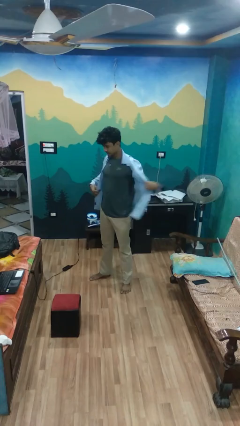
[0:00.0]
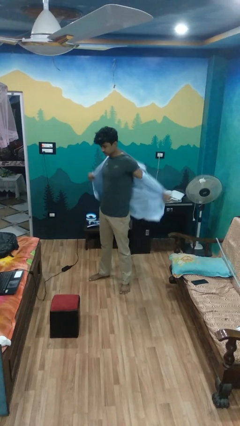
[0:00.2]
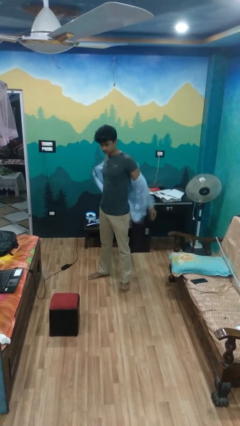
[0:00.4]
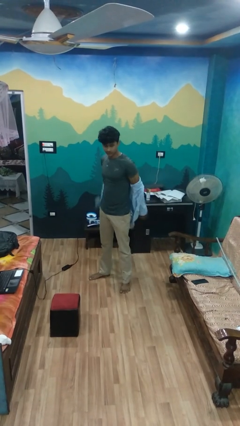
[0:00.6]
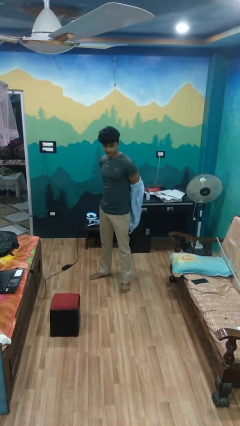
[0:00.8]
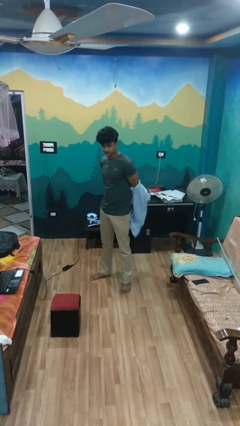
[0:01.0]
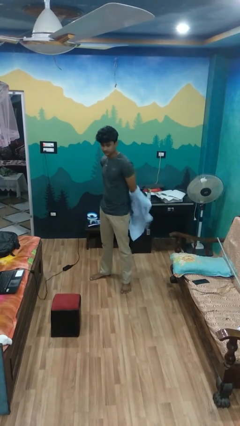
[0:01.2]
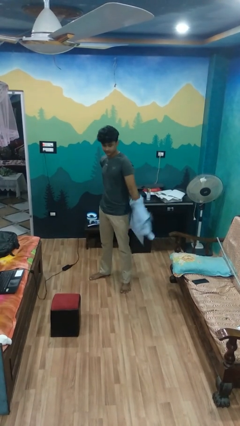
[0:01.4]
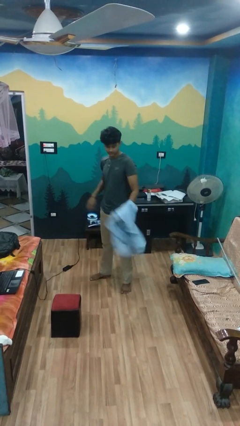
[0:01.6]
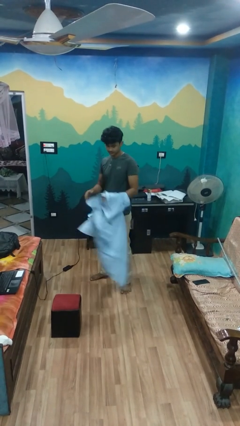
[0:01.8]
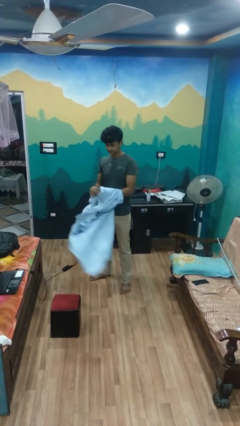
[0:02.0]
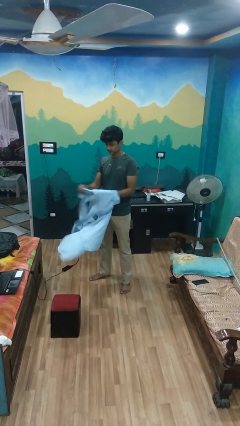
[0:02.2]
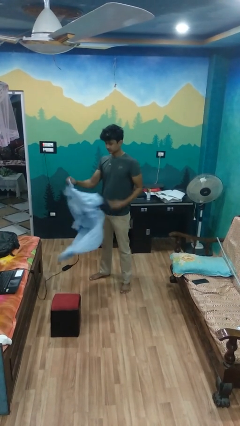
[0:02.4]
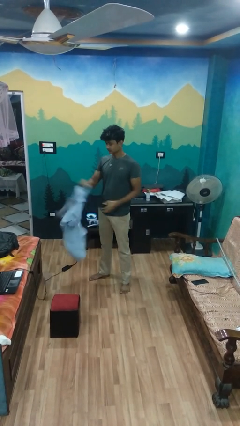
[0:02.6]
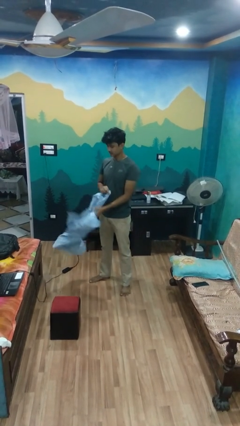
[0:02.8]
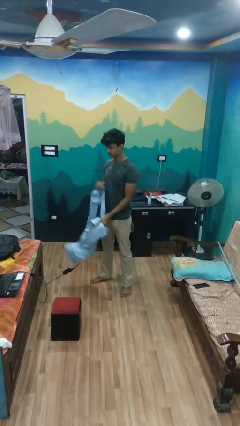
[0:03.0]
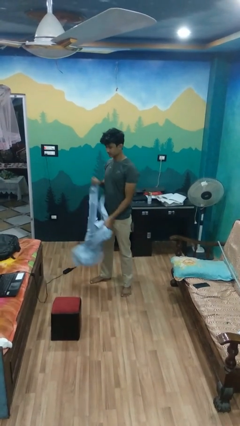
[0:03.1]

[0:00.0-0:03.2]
person takes off shirt

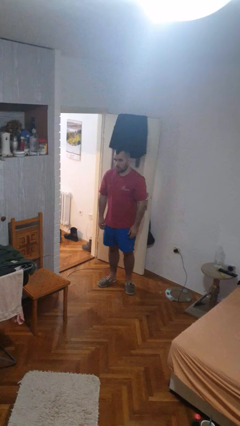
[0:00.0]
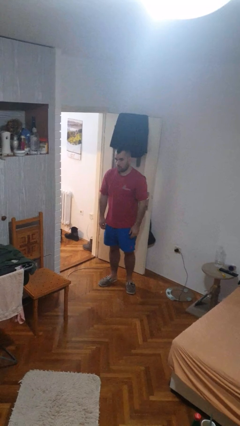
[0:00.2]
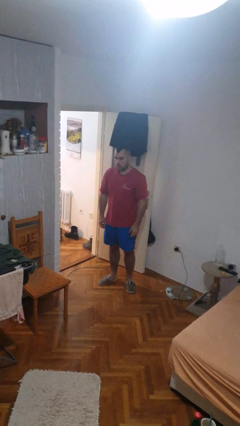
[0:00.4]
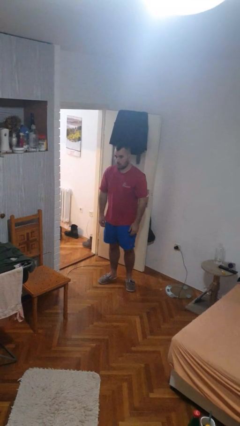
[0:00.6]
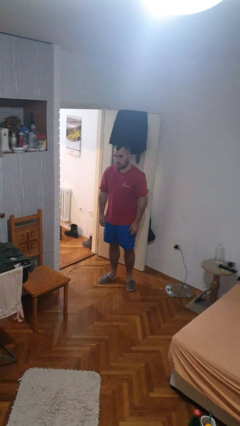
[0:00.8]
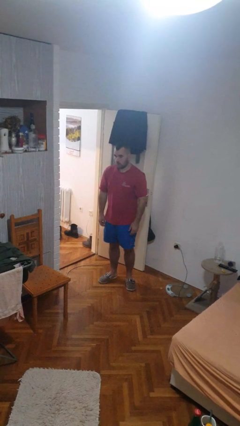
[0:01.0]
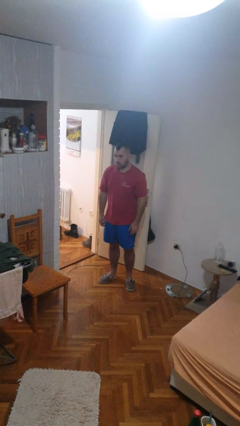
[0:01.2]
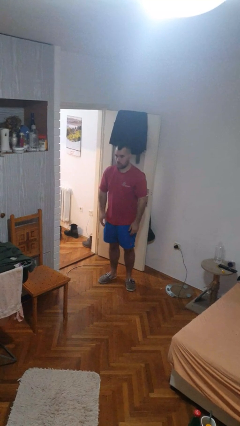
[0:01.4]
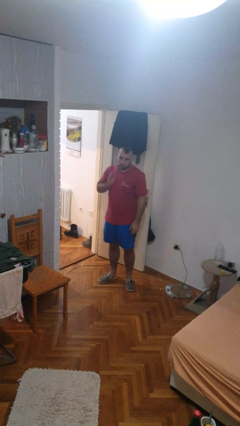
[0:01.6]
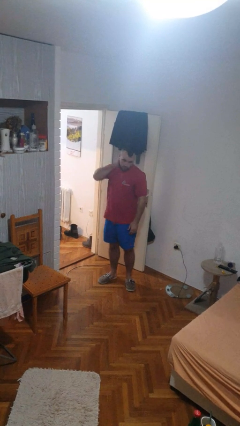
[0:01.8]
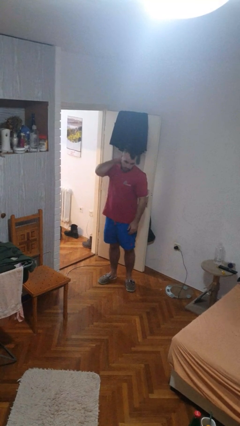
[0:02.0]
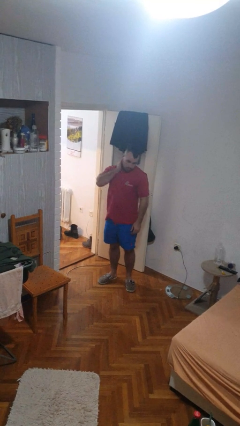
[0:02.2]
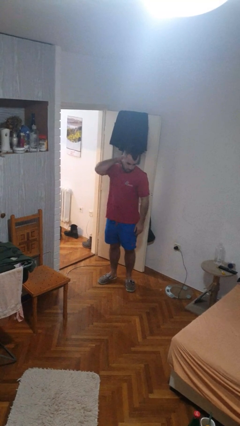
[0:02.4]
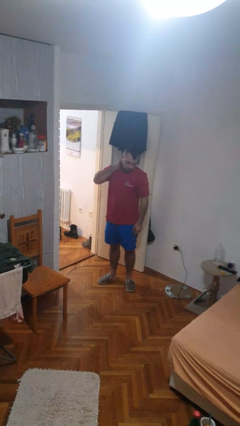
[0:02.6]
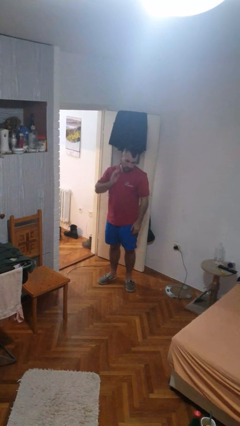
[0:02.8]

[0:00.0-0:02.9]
person rubs neck

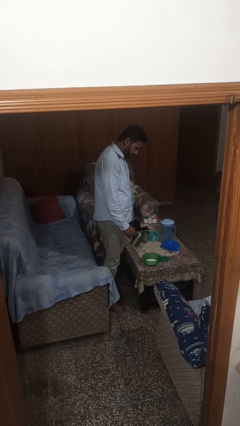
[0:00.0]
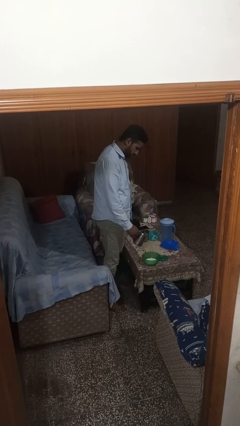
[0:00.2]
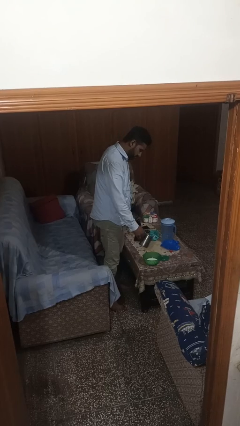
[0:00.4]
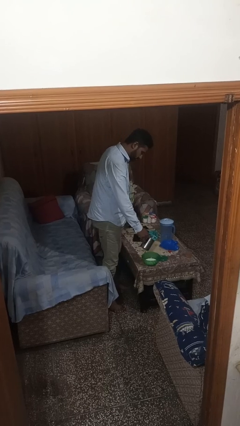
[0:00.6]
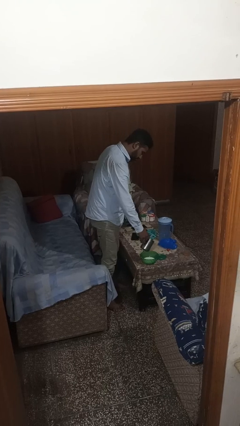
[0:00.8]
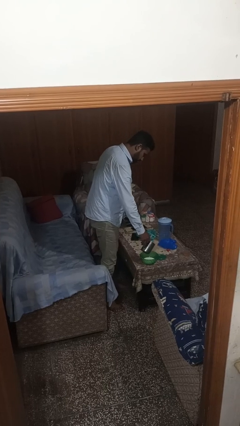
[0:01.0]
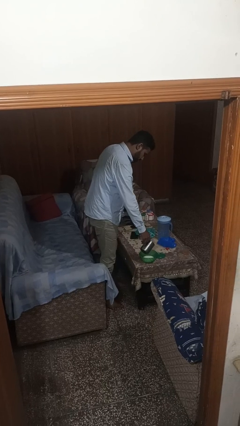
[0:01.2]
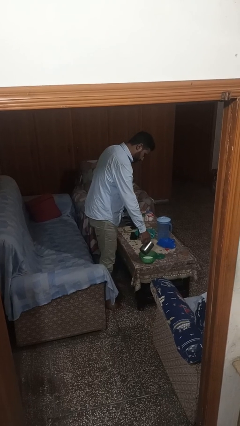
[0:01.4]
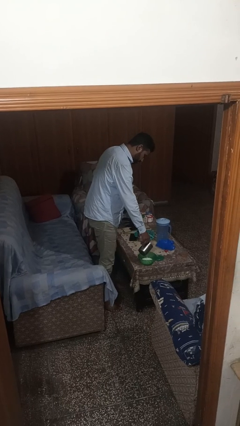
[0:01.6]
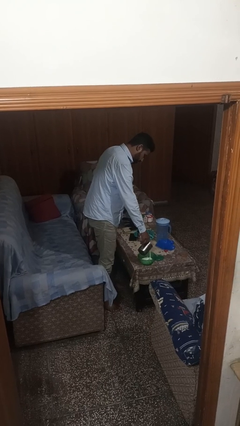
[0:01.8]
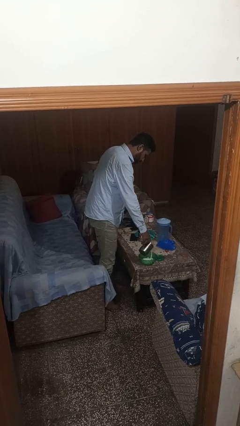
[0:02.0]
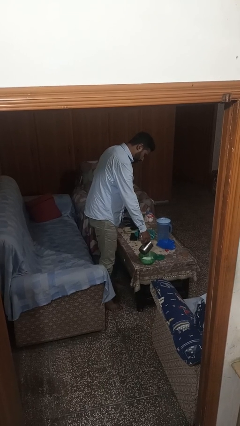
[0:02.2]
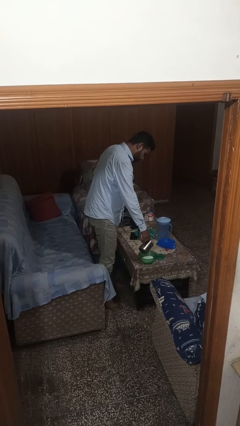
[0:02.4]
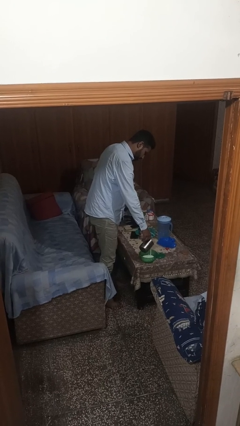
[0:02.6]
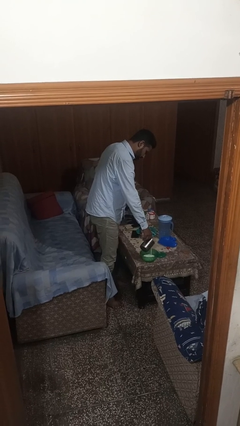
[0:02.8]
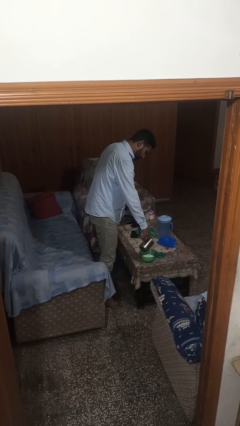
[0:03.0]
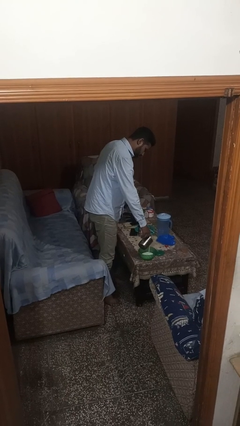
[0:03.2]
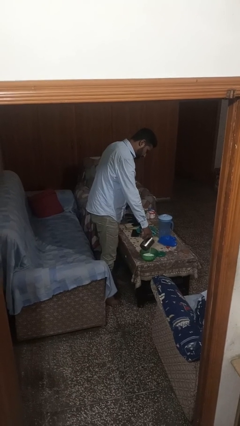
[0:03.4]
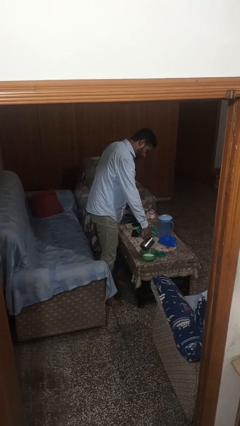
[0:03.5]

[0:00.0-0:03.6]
person pours into bowl

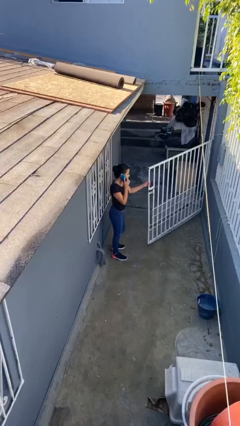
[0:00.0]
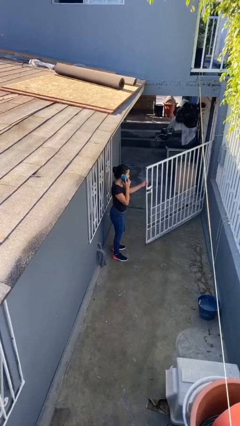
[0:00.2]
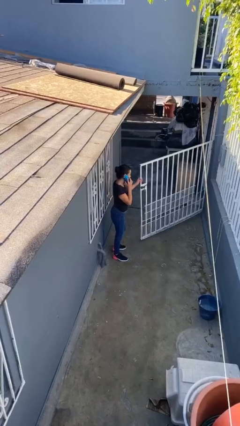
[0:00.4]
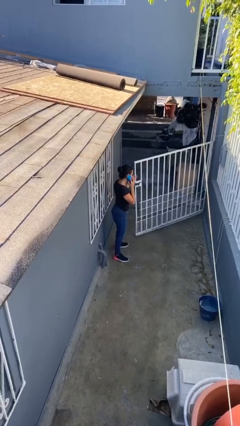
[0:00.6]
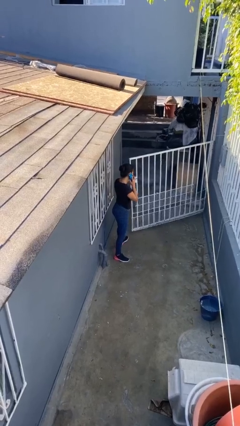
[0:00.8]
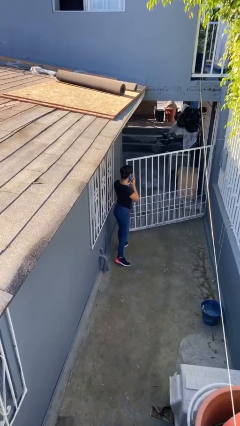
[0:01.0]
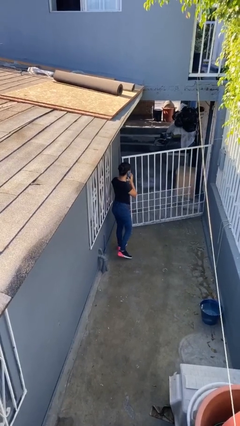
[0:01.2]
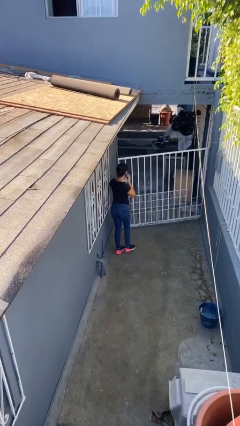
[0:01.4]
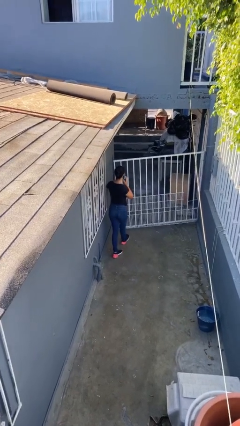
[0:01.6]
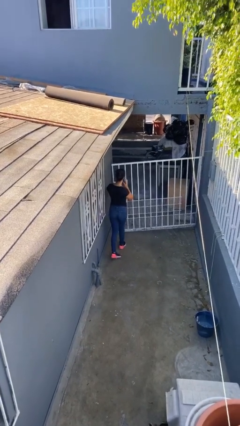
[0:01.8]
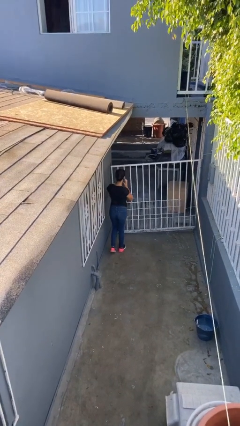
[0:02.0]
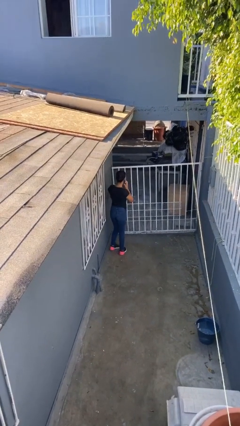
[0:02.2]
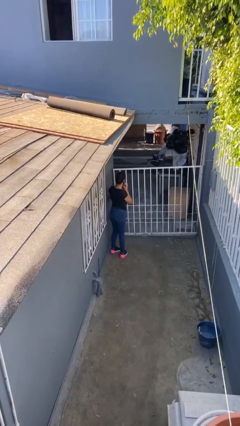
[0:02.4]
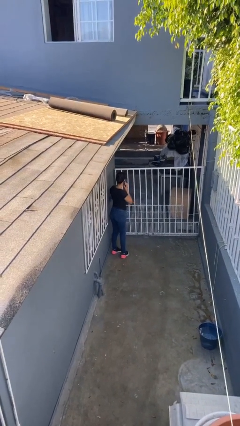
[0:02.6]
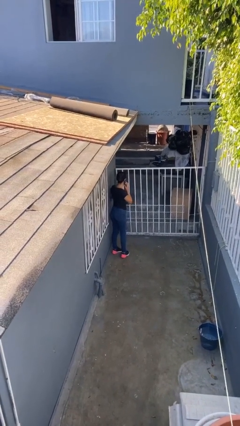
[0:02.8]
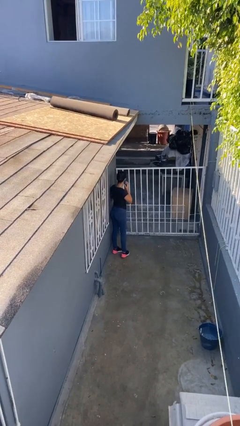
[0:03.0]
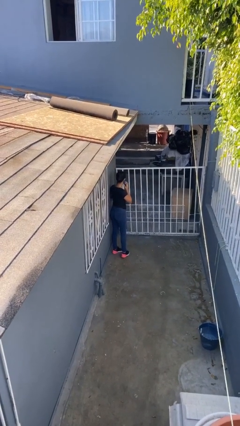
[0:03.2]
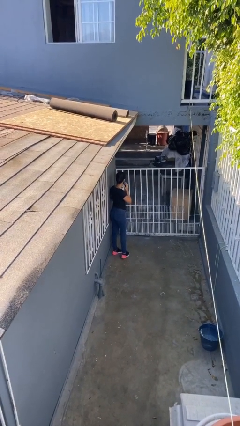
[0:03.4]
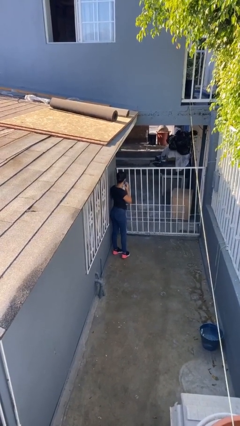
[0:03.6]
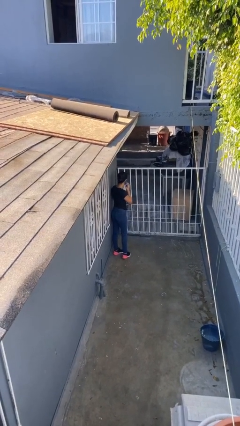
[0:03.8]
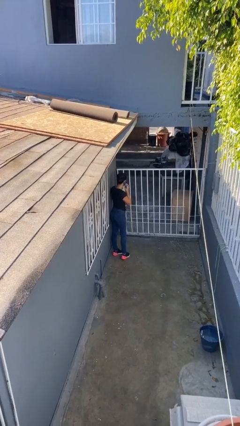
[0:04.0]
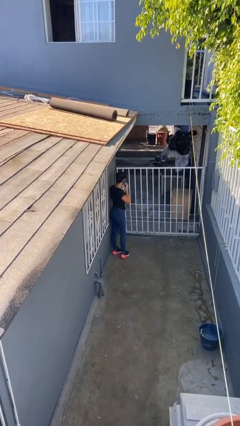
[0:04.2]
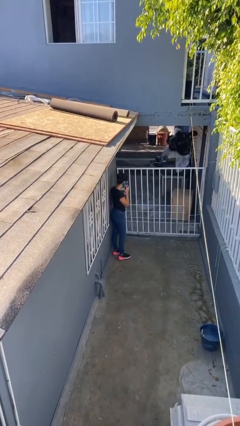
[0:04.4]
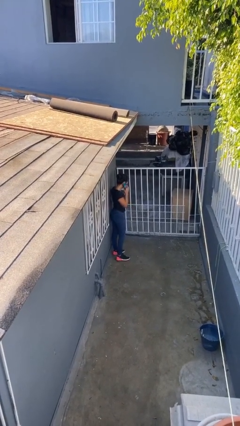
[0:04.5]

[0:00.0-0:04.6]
person closes facility door

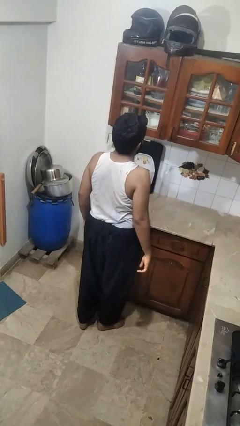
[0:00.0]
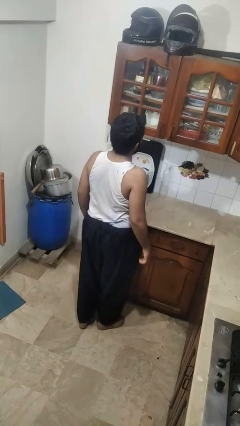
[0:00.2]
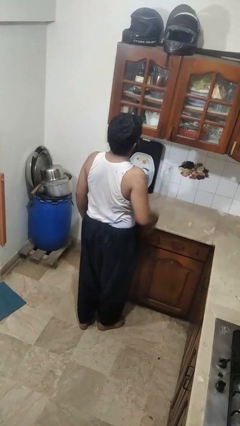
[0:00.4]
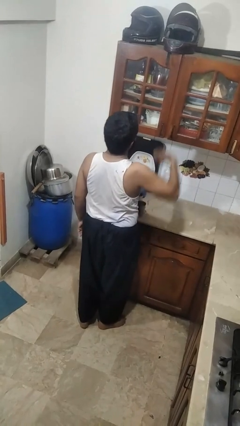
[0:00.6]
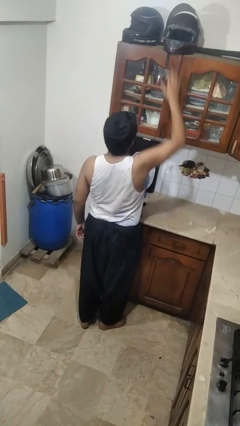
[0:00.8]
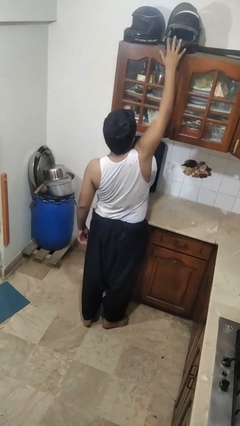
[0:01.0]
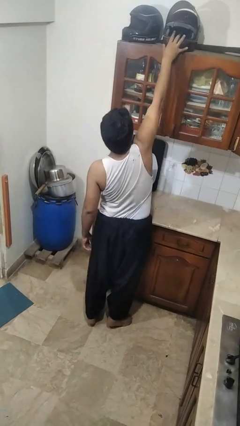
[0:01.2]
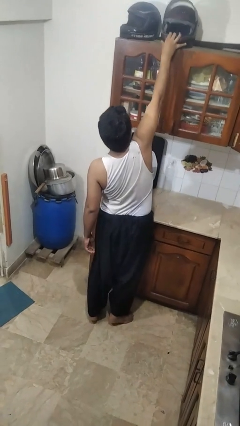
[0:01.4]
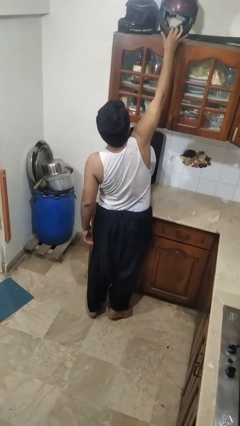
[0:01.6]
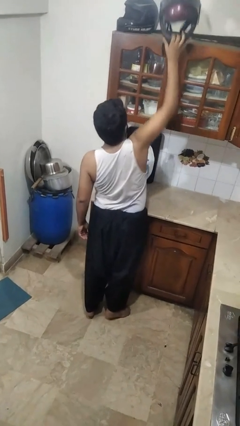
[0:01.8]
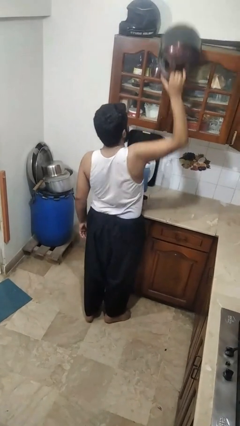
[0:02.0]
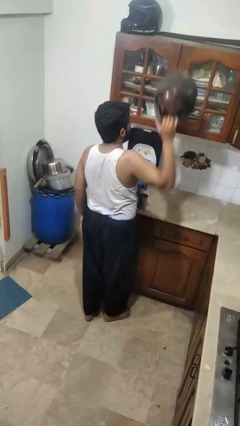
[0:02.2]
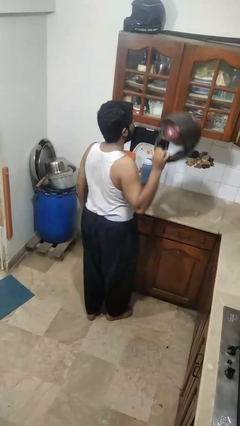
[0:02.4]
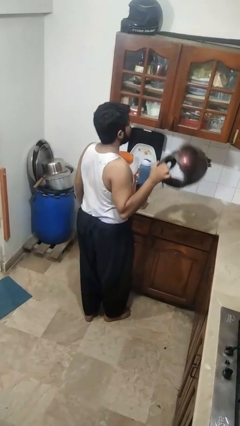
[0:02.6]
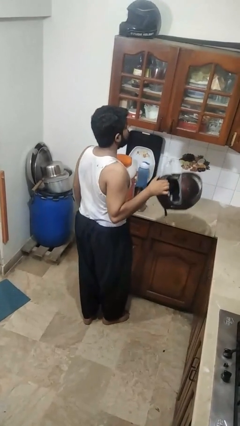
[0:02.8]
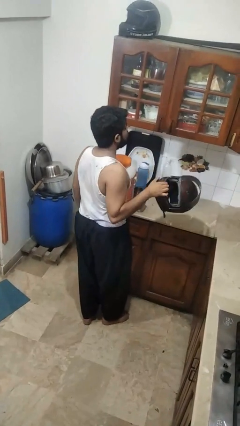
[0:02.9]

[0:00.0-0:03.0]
person picks up object from shelf

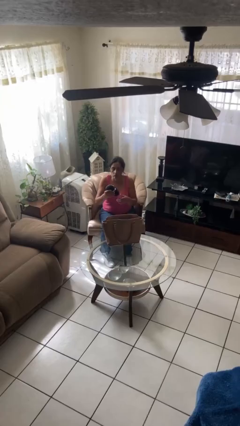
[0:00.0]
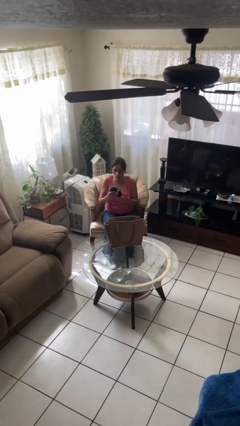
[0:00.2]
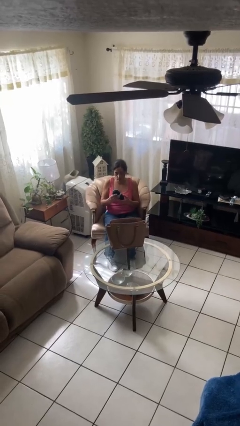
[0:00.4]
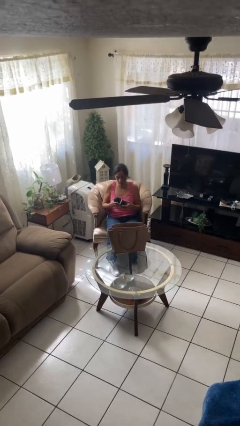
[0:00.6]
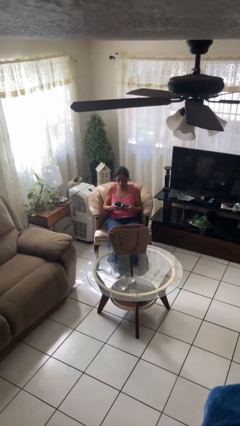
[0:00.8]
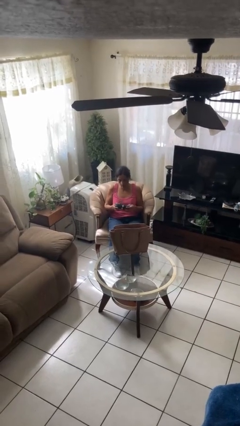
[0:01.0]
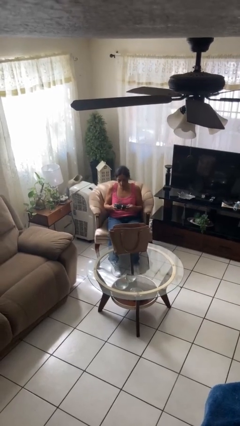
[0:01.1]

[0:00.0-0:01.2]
person takes object from purse
